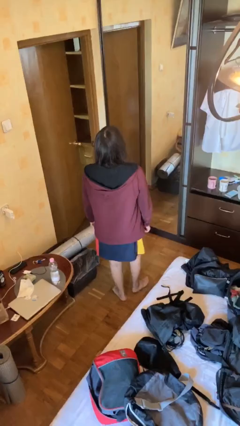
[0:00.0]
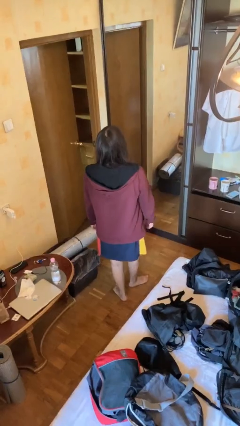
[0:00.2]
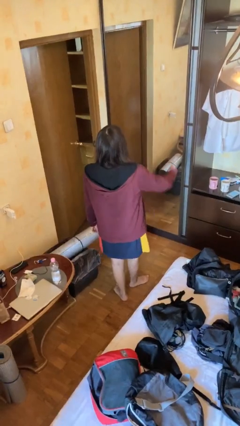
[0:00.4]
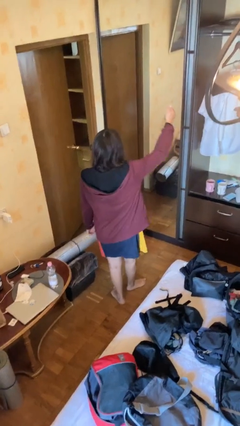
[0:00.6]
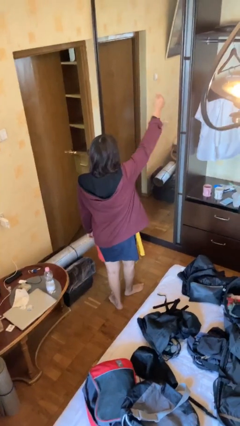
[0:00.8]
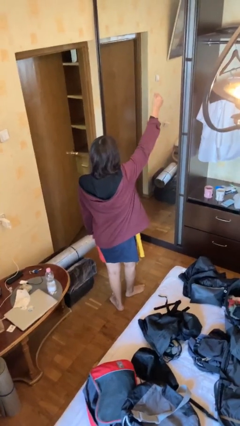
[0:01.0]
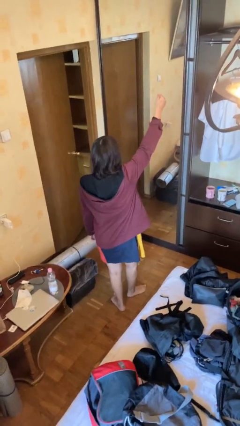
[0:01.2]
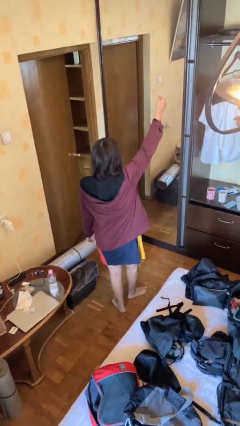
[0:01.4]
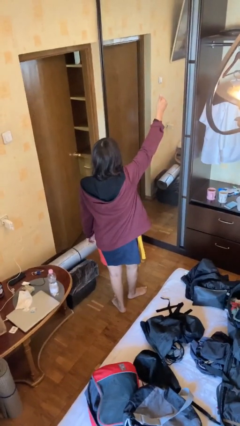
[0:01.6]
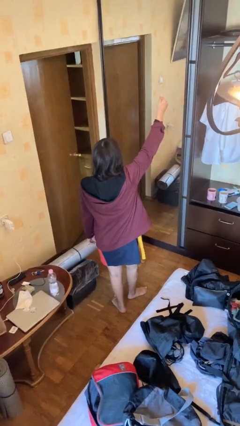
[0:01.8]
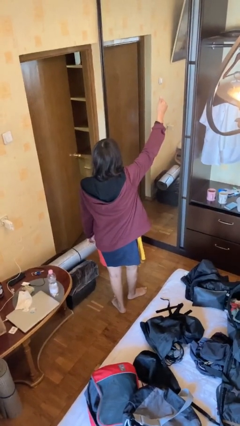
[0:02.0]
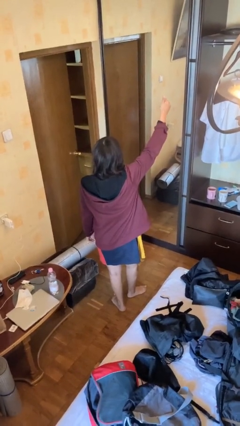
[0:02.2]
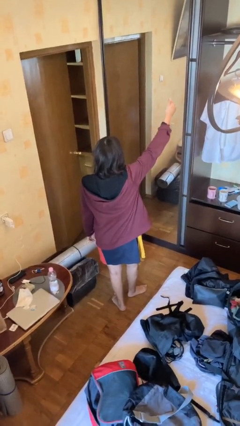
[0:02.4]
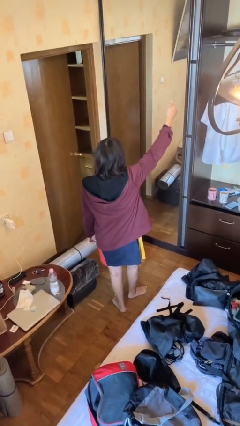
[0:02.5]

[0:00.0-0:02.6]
person gestures thumbs up

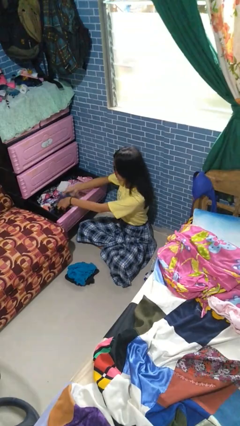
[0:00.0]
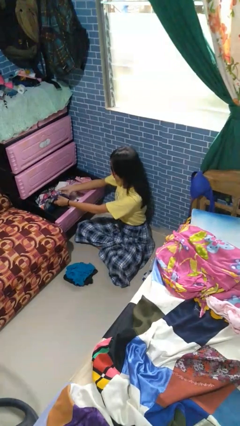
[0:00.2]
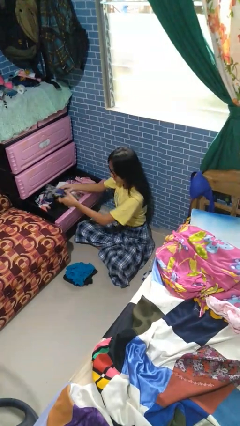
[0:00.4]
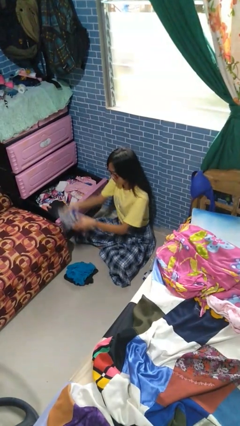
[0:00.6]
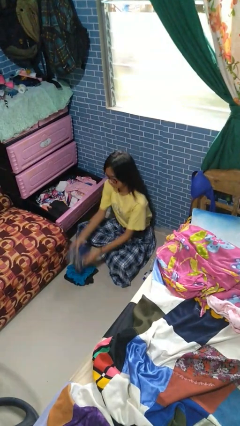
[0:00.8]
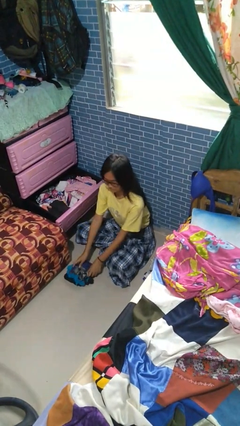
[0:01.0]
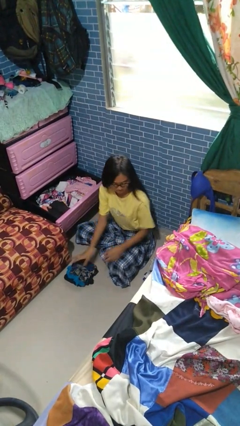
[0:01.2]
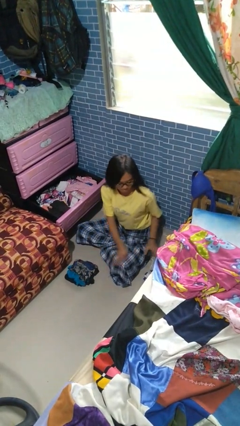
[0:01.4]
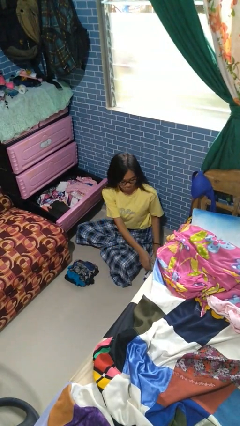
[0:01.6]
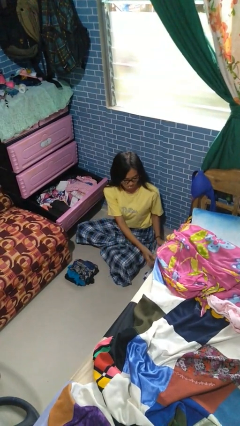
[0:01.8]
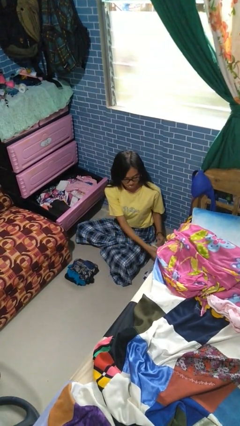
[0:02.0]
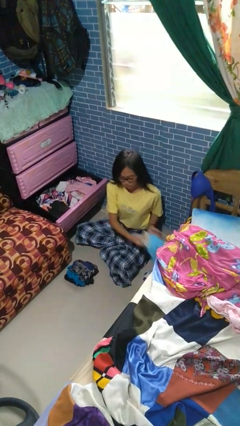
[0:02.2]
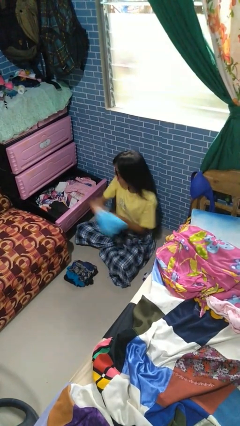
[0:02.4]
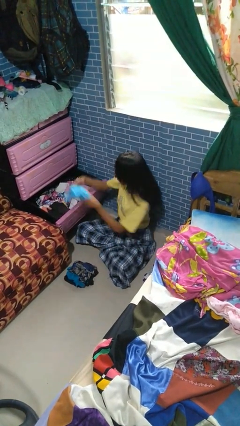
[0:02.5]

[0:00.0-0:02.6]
person takes clothes from dresser

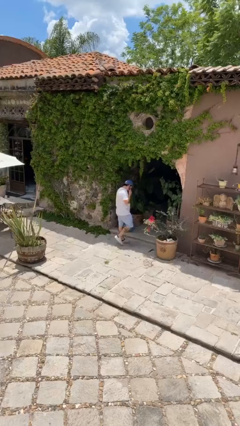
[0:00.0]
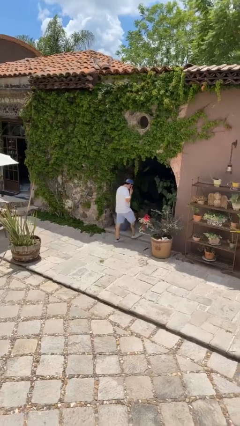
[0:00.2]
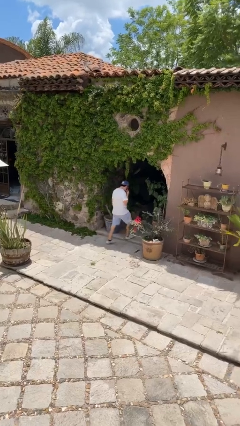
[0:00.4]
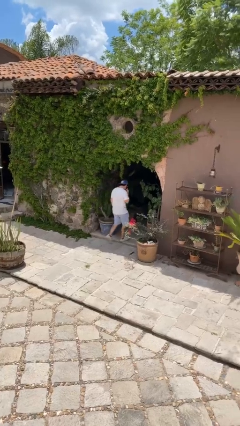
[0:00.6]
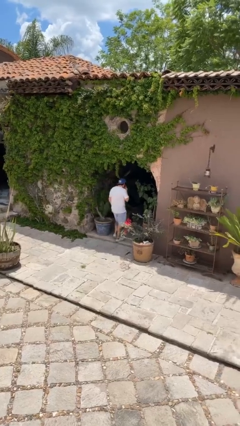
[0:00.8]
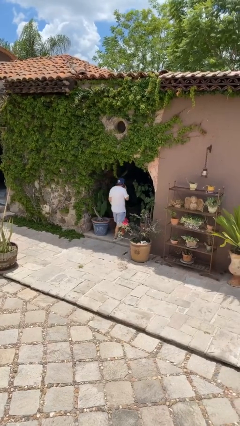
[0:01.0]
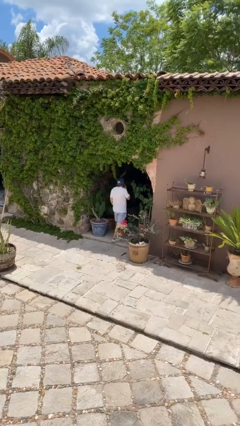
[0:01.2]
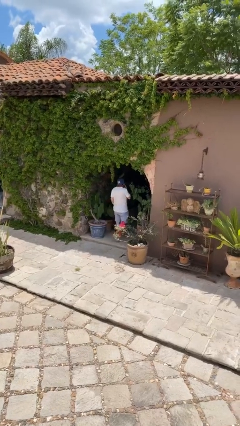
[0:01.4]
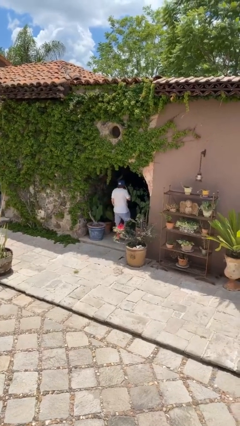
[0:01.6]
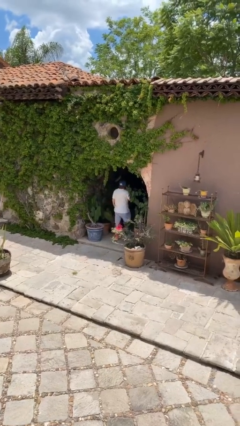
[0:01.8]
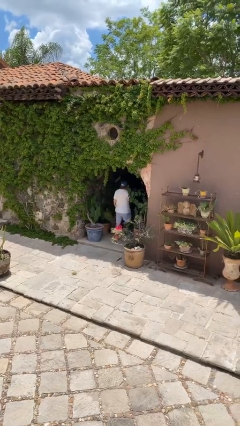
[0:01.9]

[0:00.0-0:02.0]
person exits scene through structure

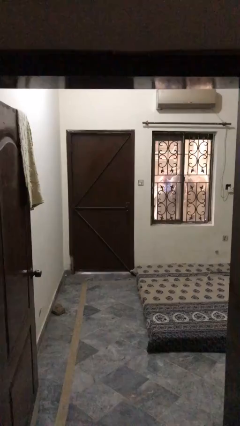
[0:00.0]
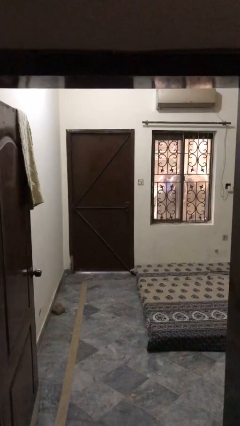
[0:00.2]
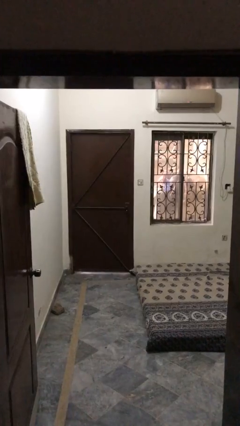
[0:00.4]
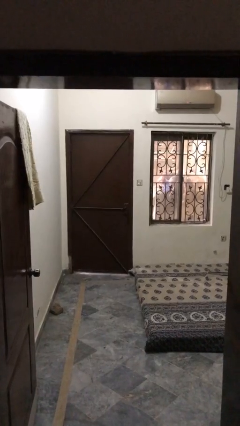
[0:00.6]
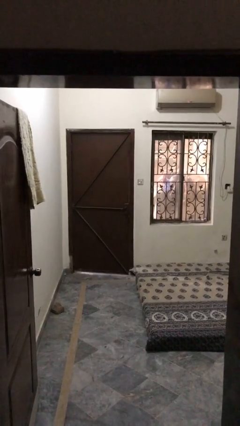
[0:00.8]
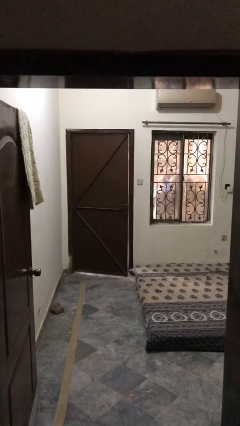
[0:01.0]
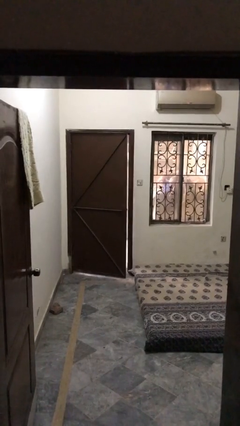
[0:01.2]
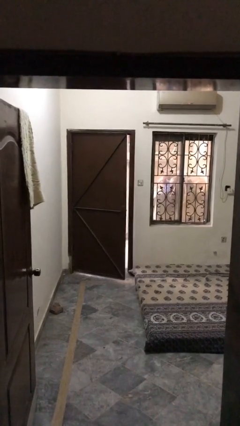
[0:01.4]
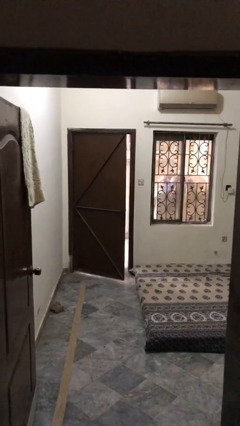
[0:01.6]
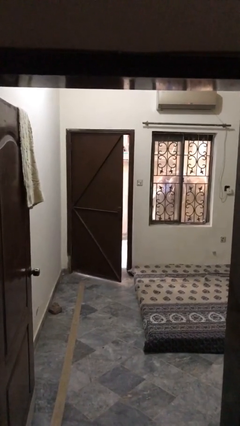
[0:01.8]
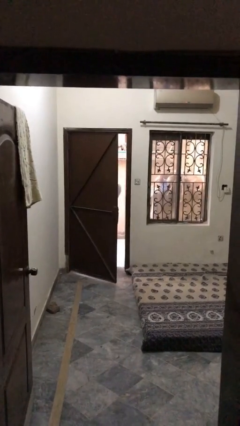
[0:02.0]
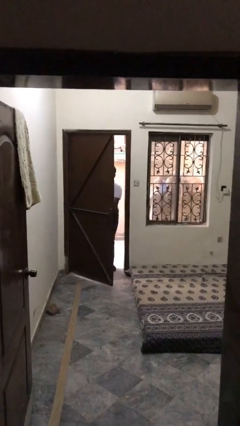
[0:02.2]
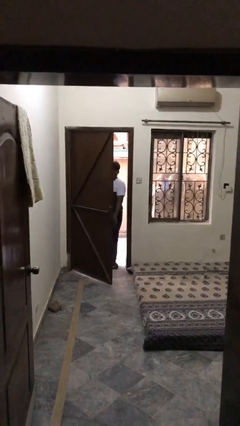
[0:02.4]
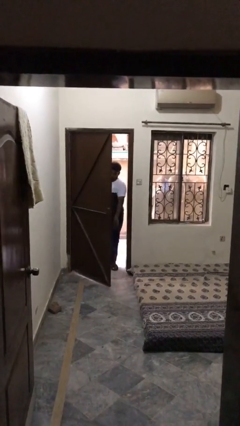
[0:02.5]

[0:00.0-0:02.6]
person opens facility door

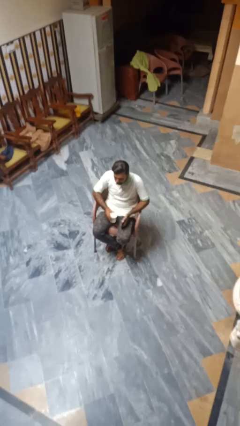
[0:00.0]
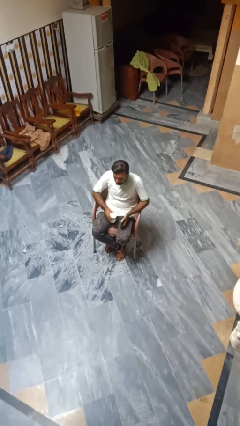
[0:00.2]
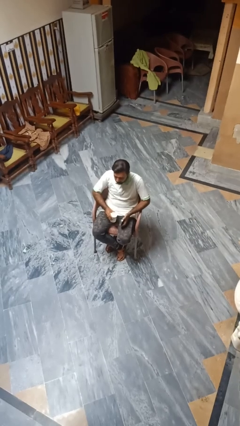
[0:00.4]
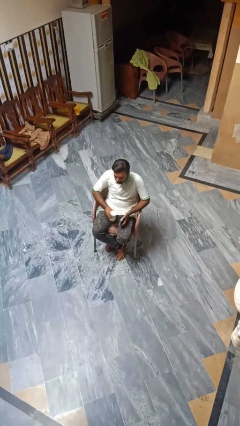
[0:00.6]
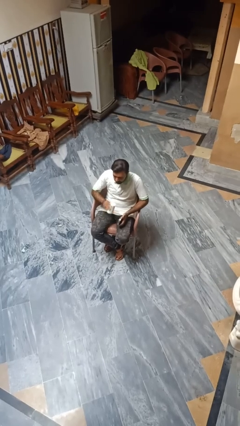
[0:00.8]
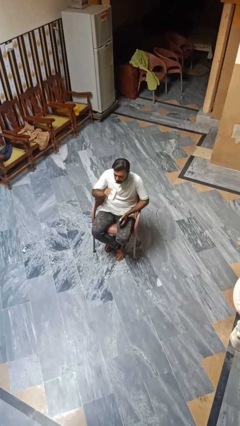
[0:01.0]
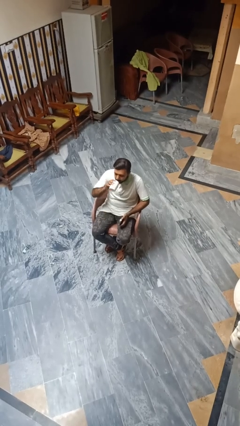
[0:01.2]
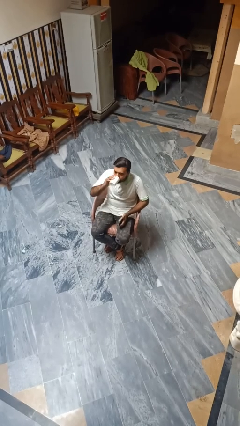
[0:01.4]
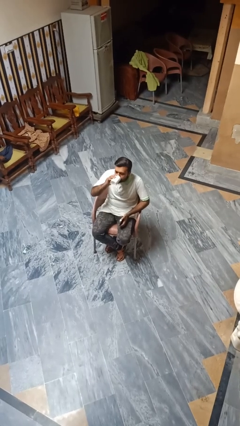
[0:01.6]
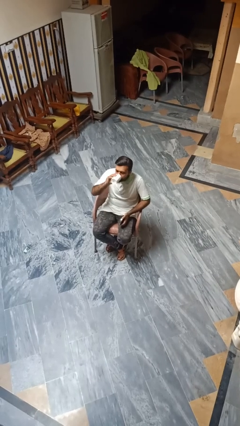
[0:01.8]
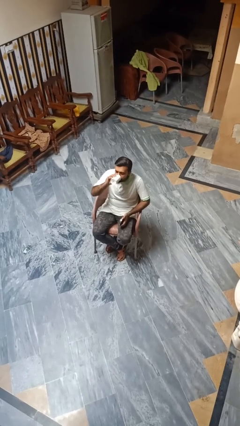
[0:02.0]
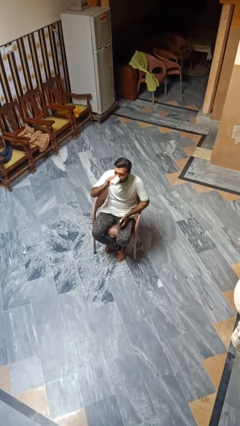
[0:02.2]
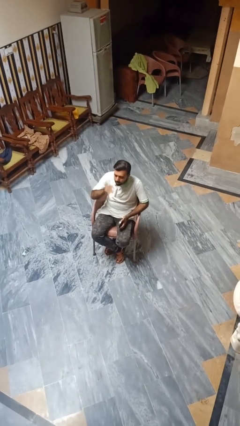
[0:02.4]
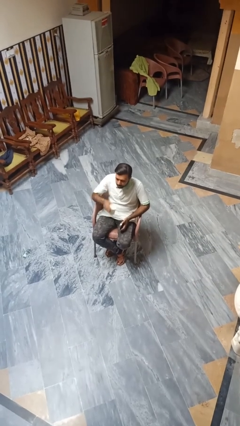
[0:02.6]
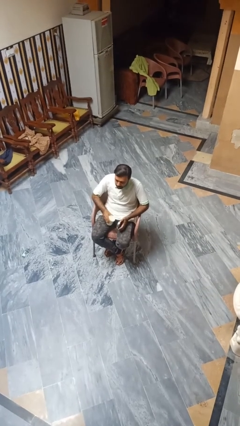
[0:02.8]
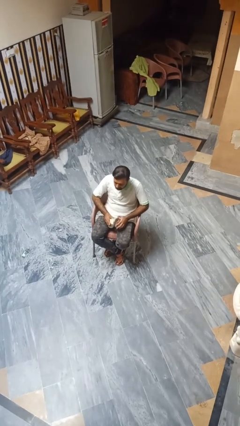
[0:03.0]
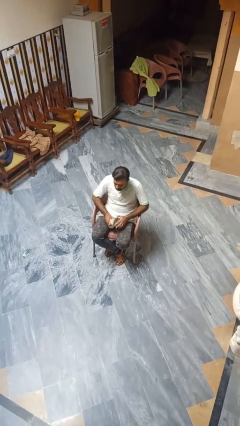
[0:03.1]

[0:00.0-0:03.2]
person drinks from beverage can

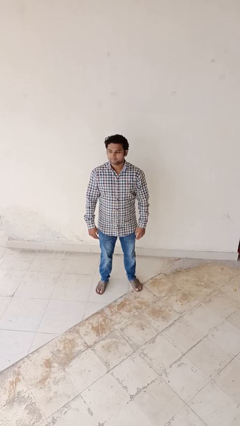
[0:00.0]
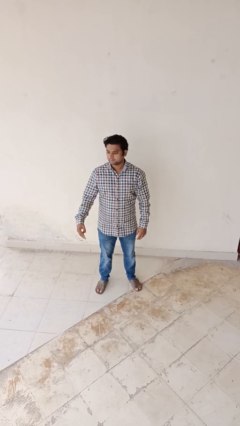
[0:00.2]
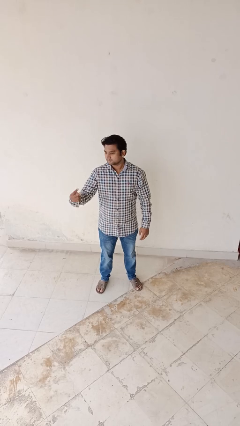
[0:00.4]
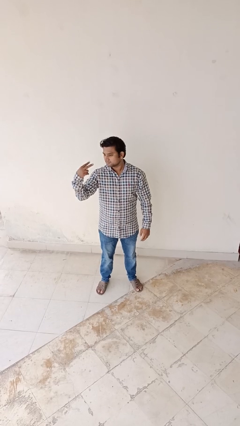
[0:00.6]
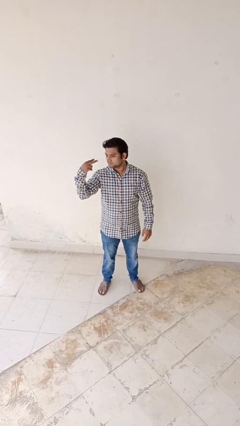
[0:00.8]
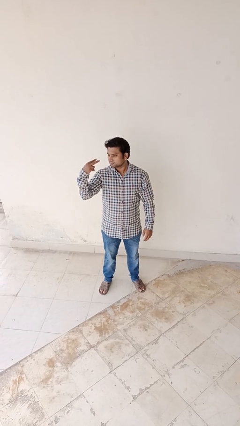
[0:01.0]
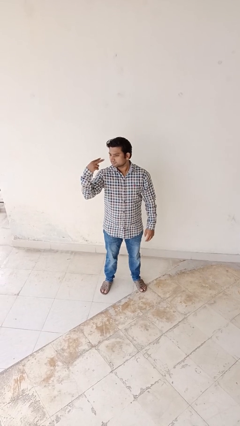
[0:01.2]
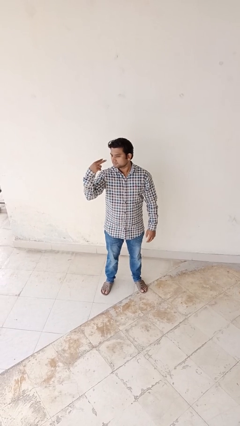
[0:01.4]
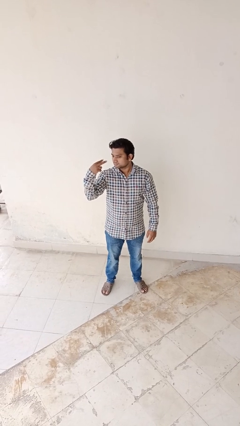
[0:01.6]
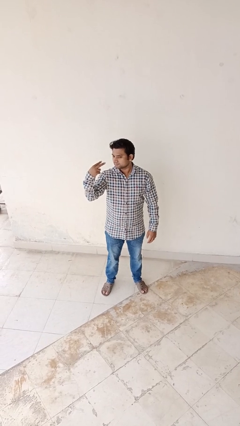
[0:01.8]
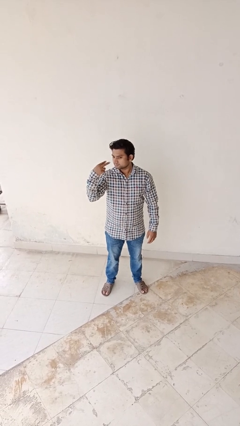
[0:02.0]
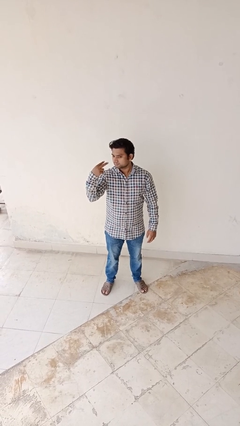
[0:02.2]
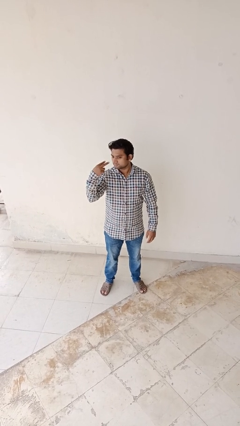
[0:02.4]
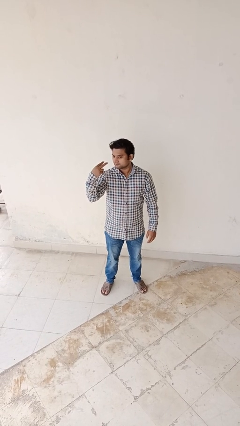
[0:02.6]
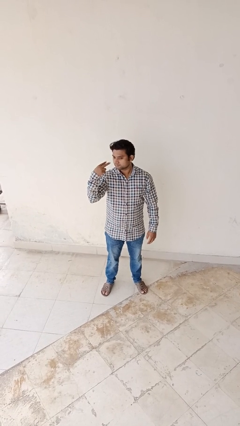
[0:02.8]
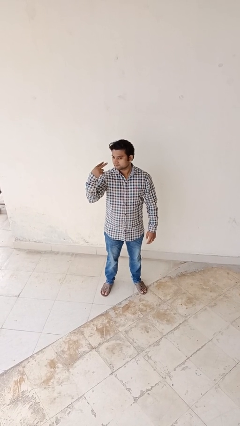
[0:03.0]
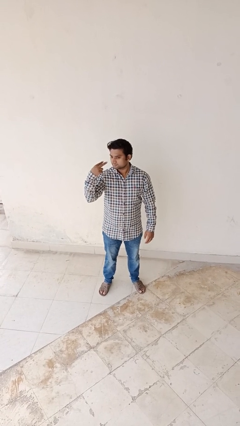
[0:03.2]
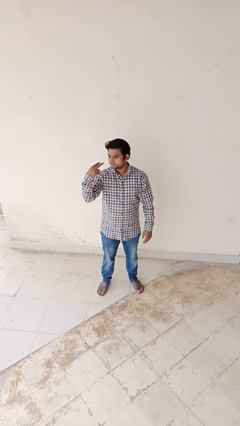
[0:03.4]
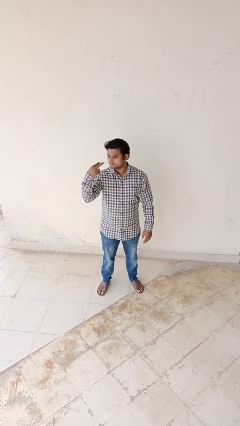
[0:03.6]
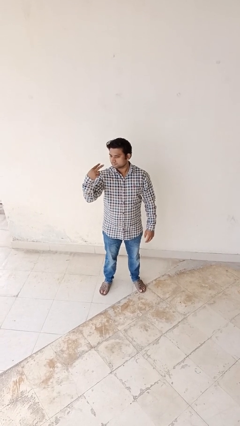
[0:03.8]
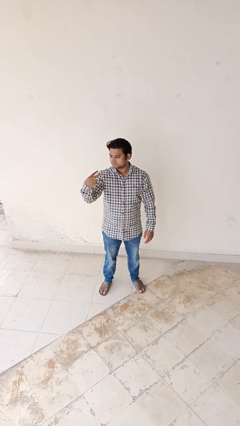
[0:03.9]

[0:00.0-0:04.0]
person gestures watch closely
